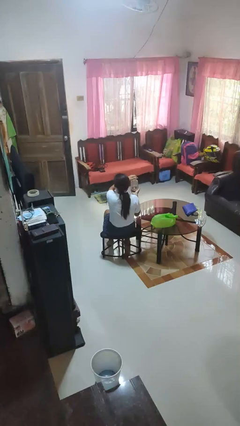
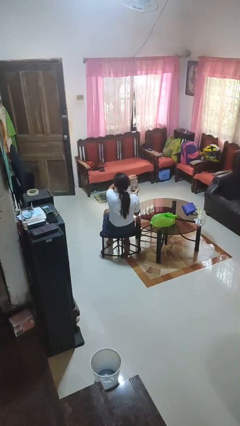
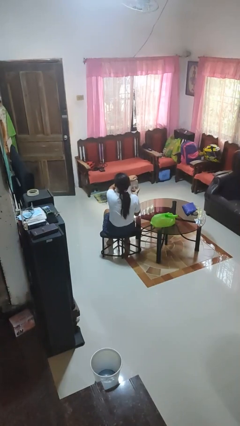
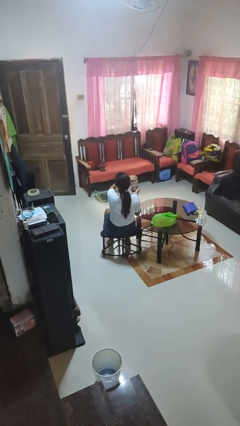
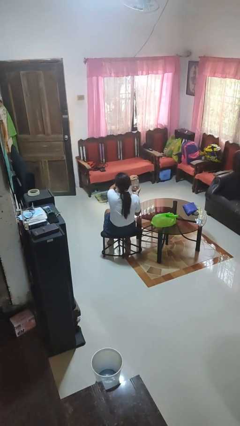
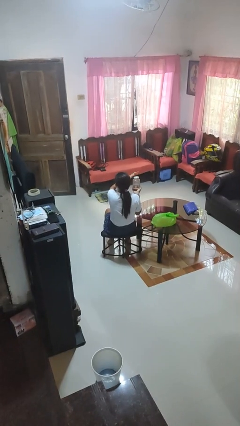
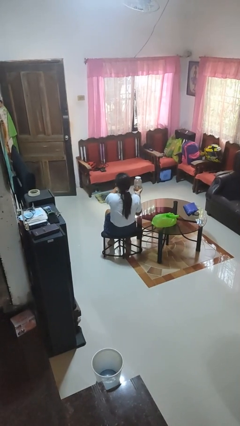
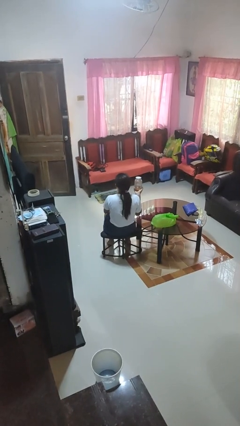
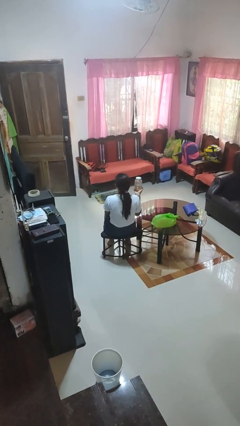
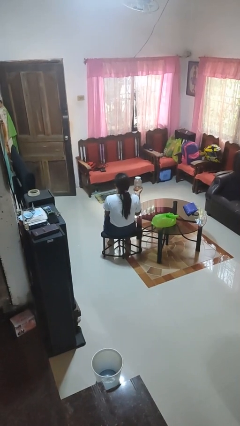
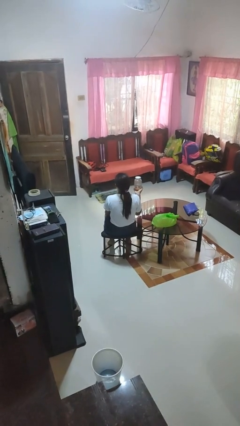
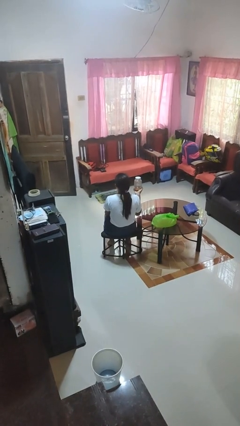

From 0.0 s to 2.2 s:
person closes jar

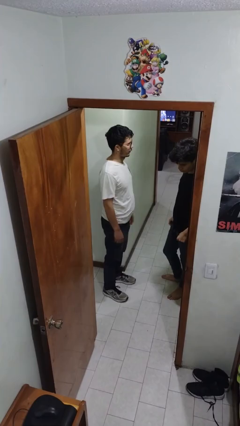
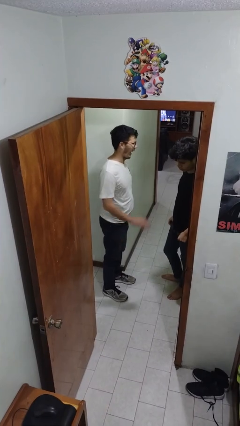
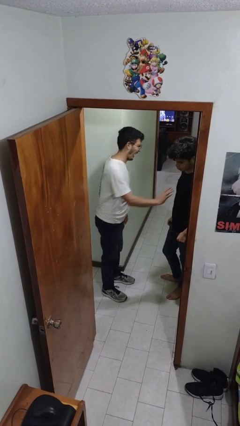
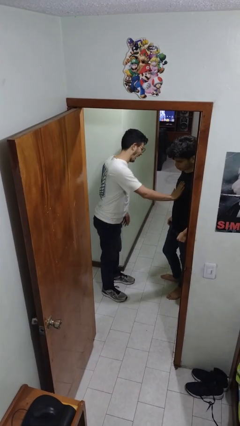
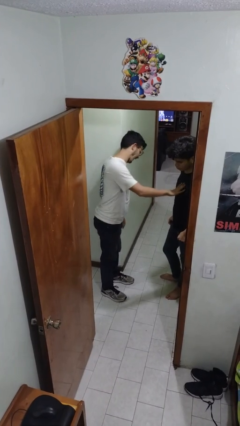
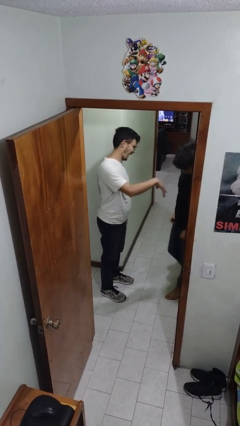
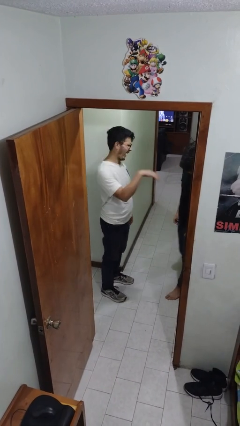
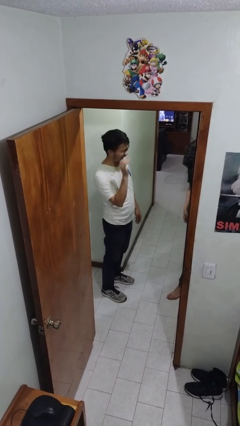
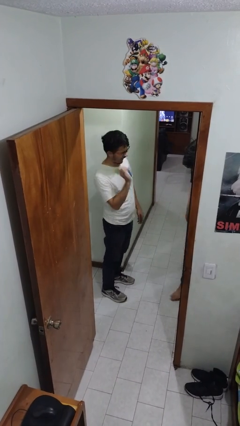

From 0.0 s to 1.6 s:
person shoves person

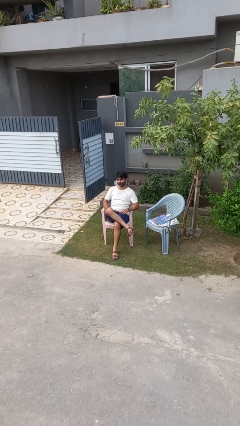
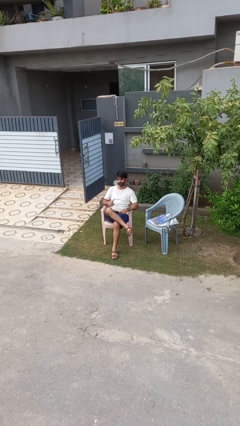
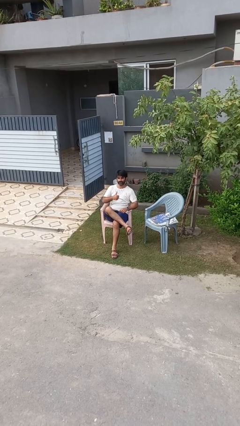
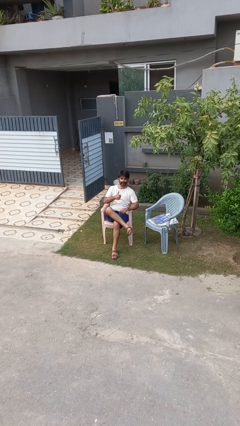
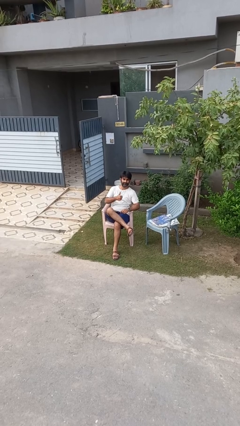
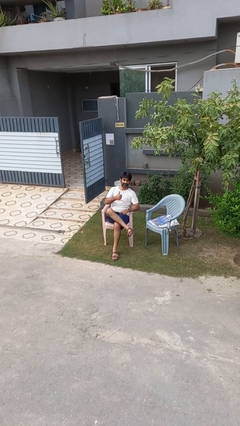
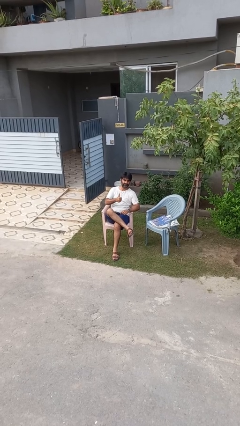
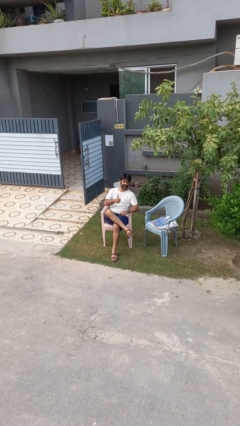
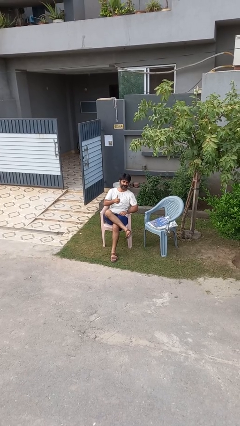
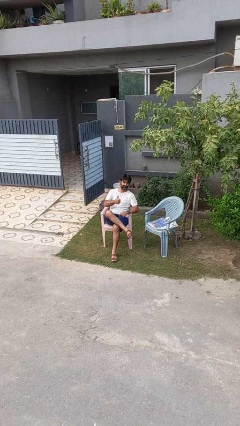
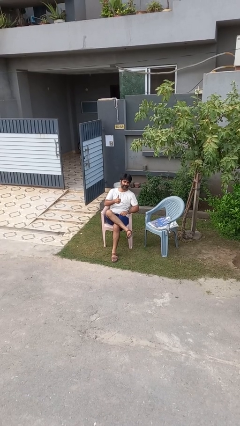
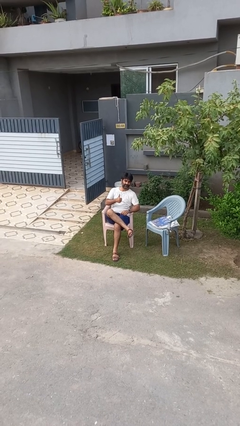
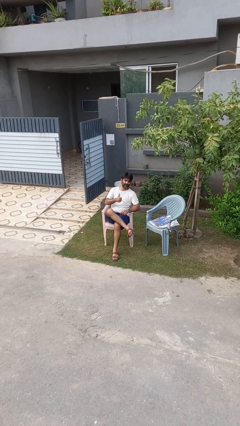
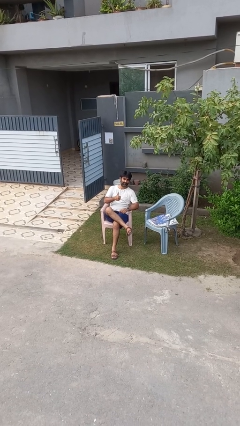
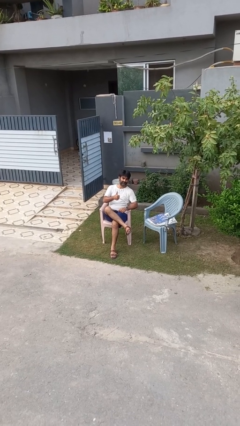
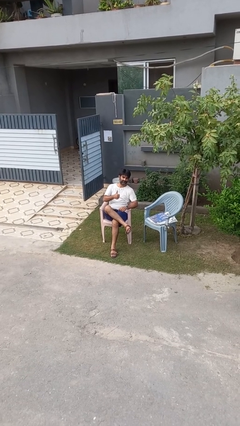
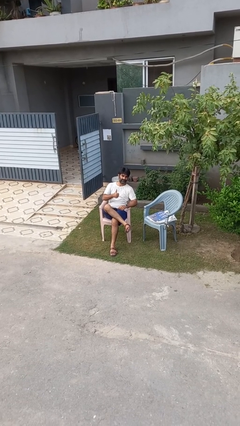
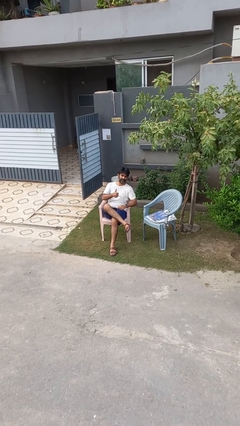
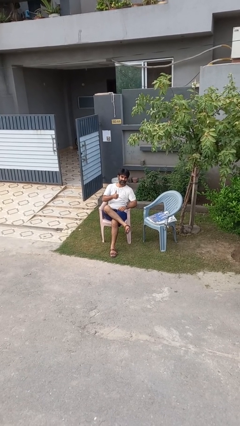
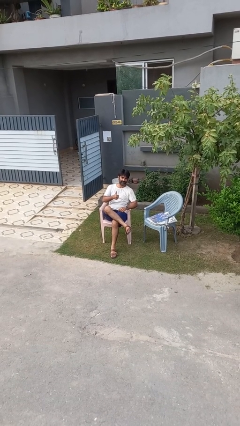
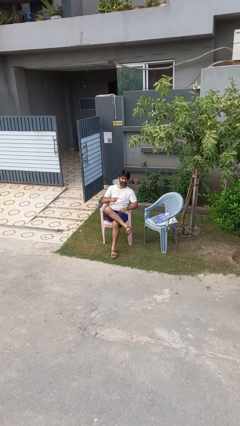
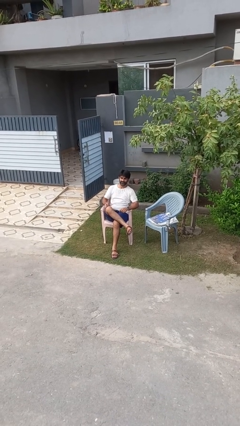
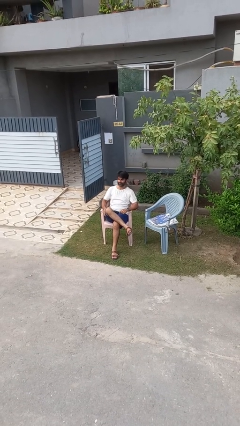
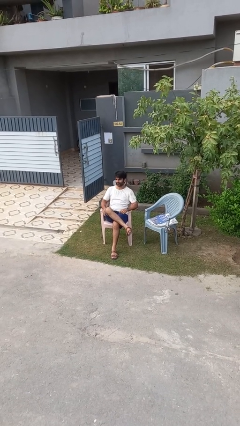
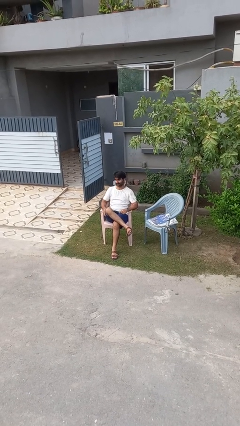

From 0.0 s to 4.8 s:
person gestures thumbs up

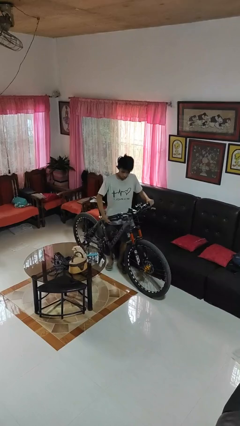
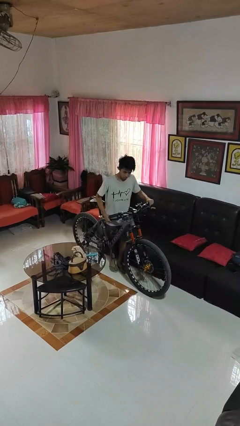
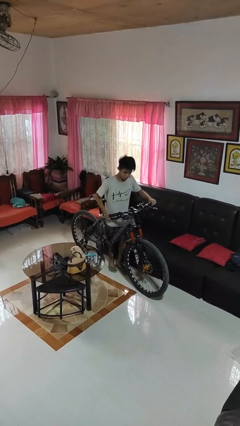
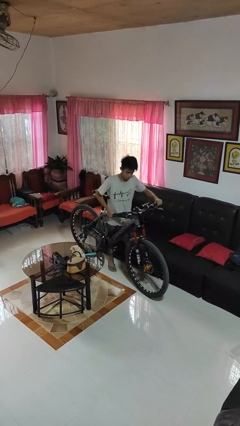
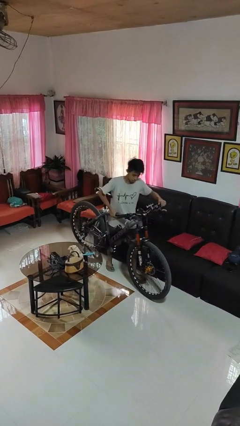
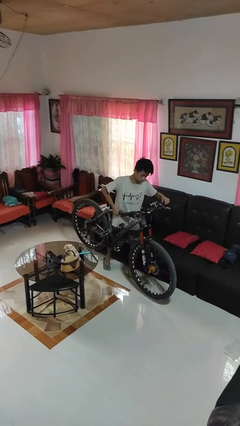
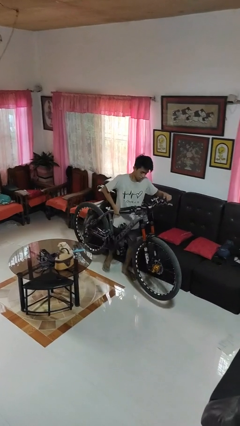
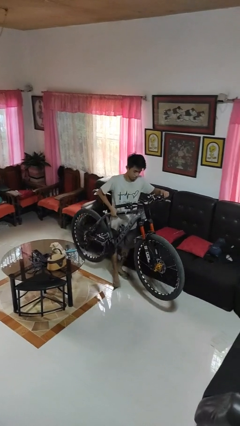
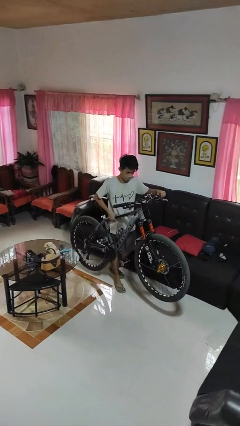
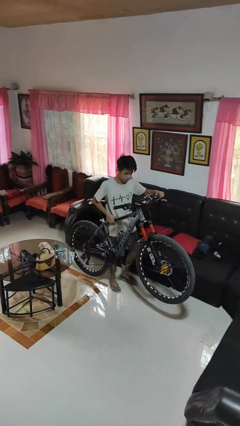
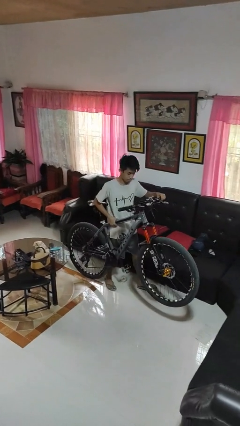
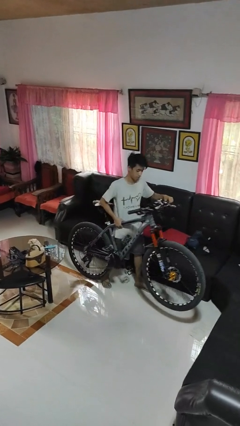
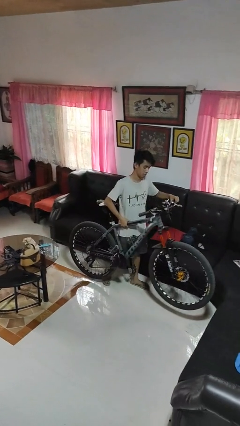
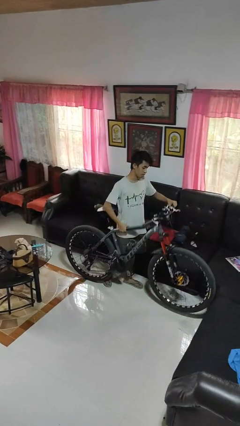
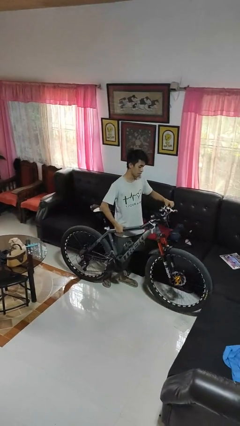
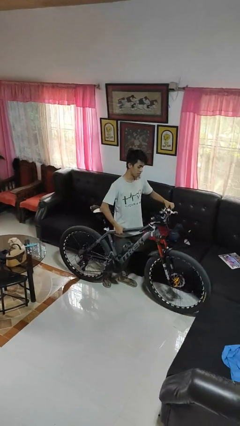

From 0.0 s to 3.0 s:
person carries bicycle

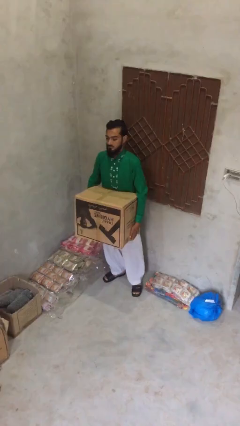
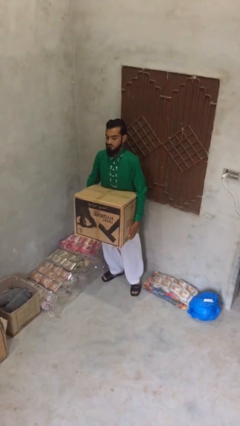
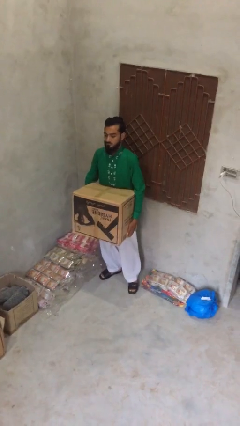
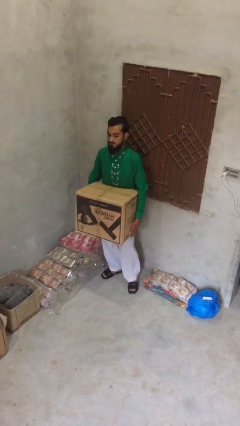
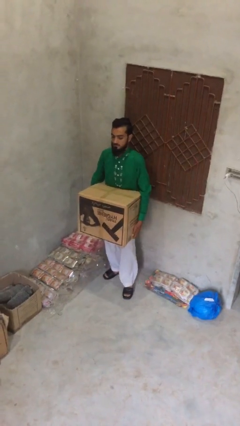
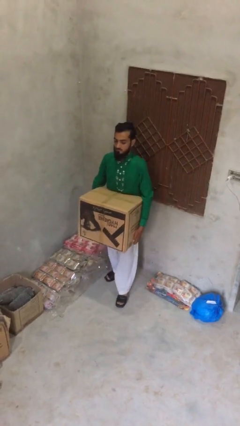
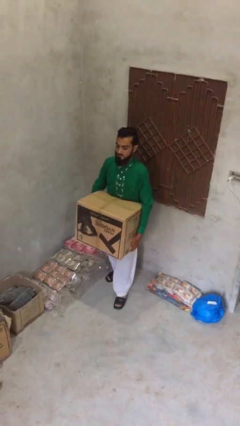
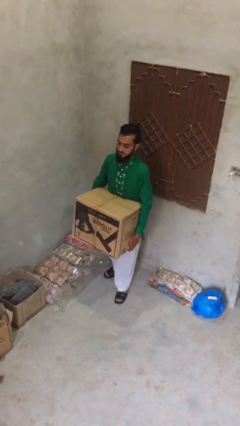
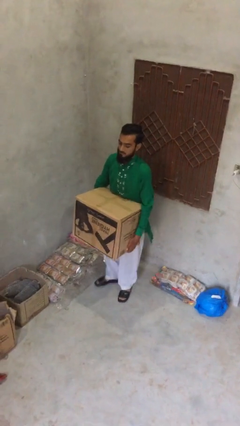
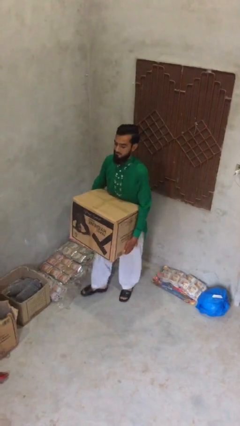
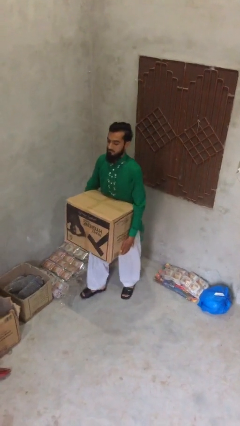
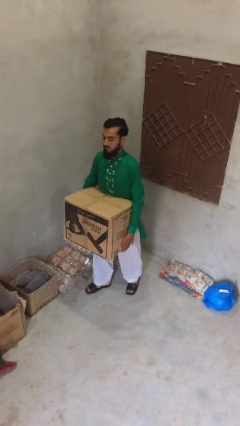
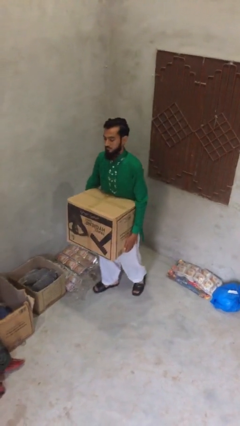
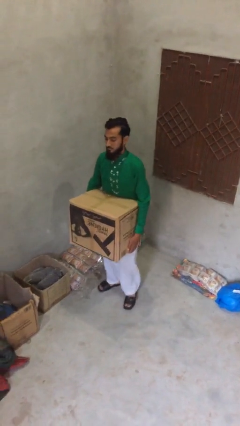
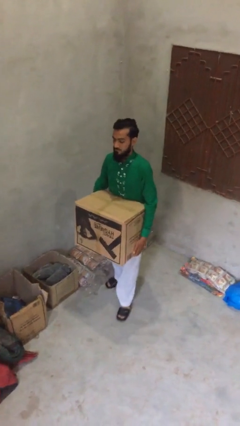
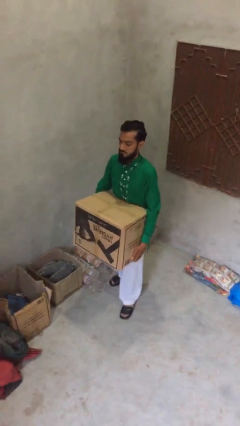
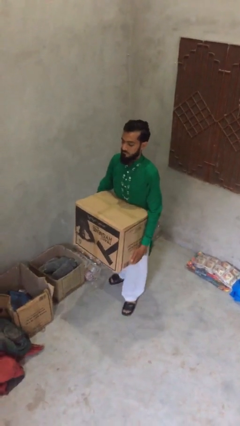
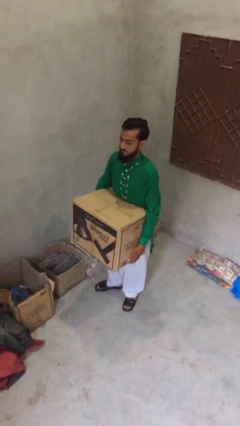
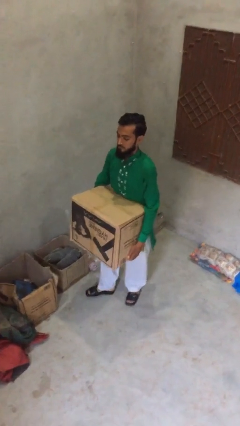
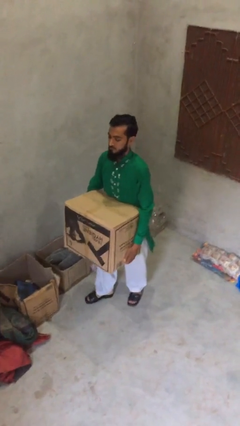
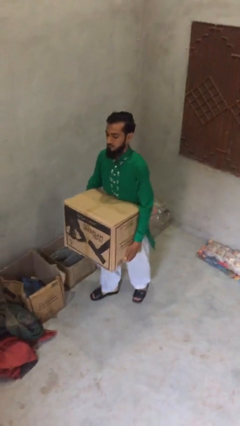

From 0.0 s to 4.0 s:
person carries heavy object

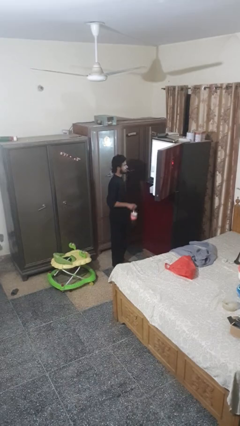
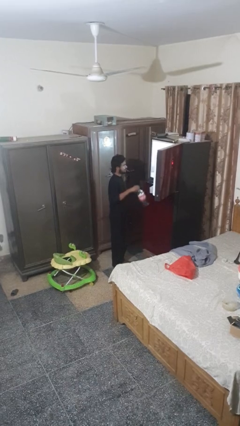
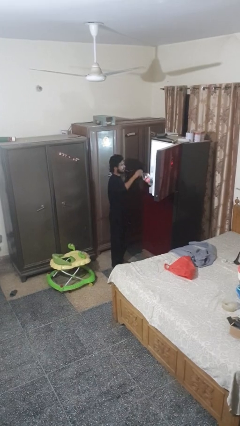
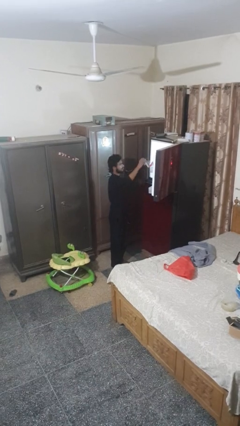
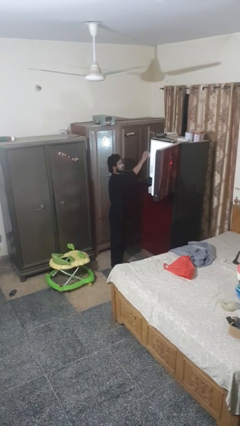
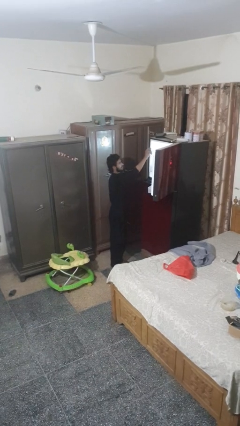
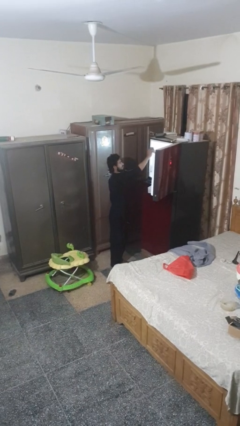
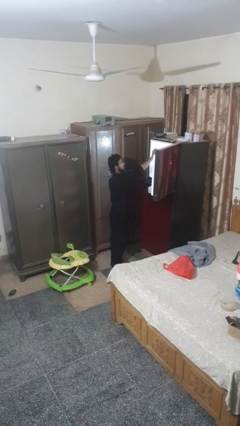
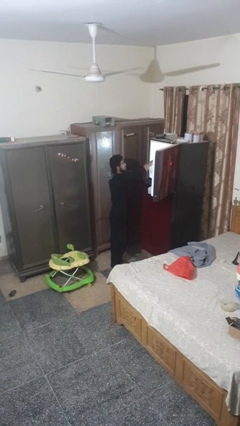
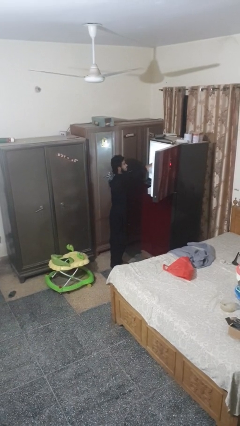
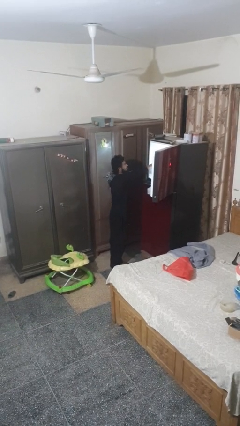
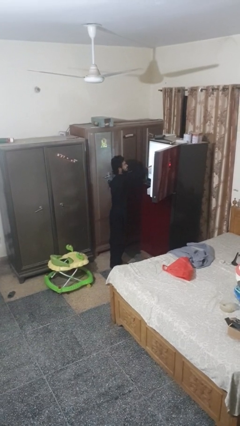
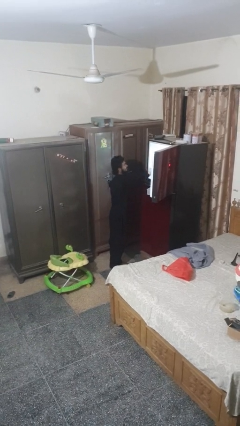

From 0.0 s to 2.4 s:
person puts object into refrigerator
